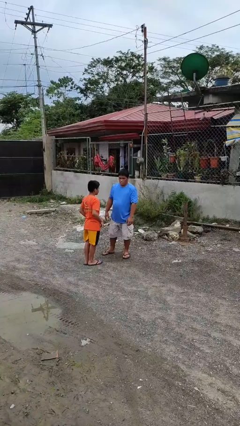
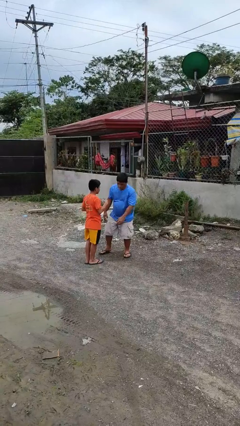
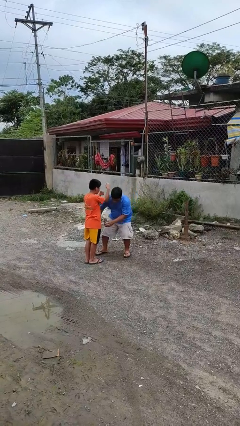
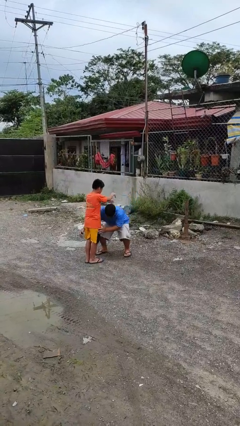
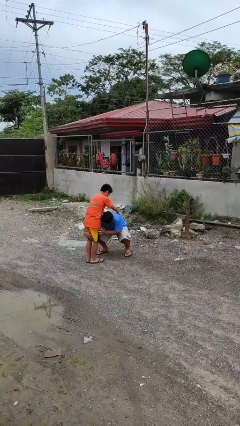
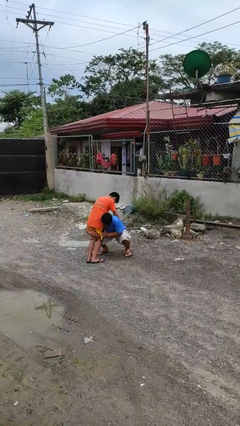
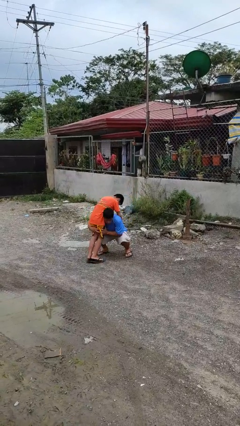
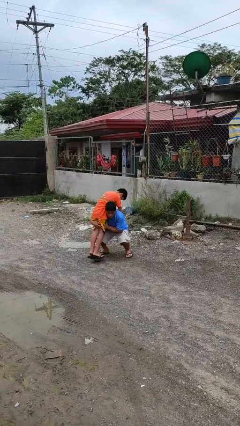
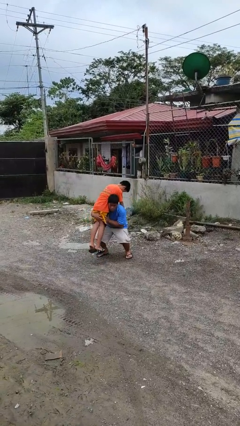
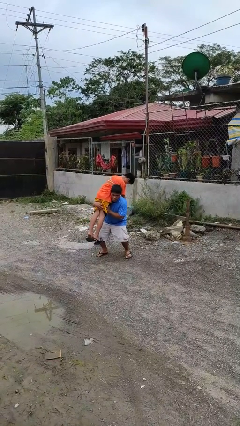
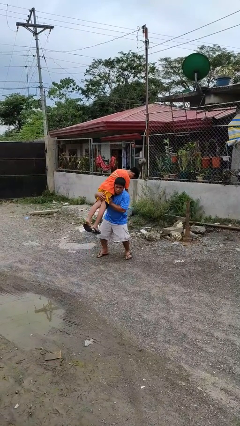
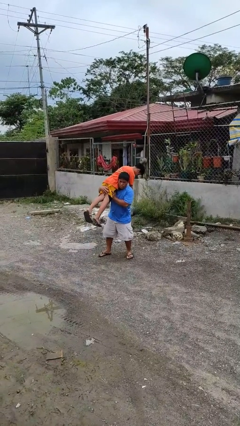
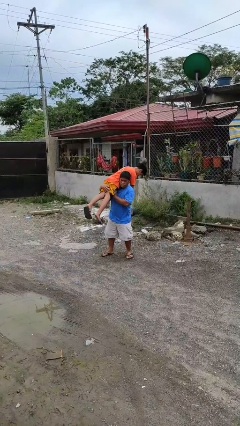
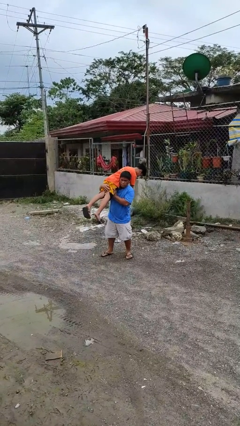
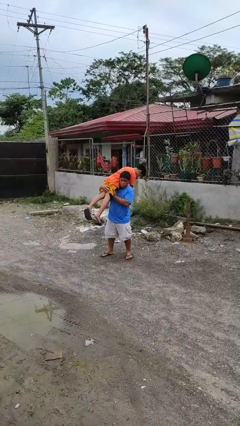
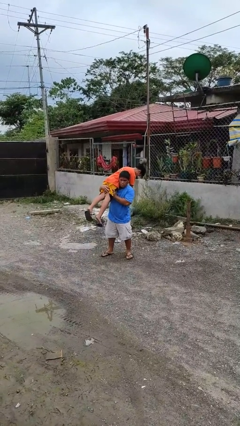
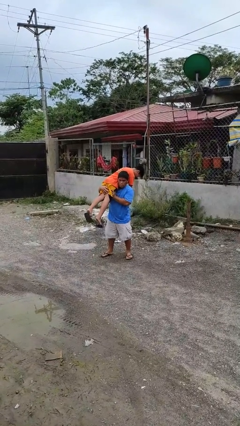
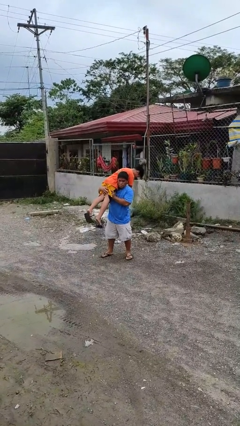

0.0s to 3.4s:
person carries person over shoulder

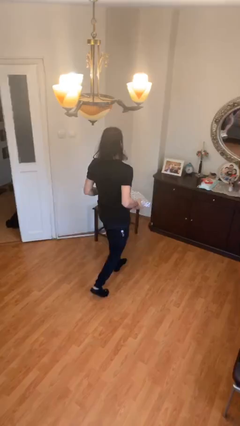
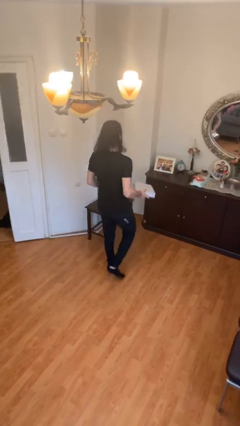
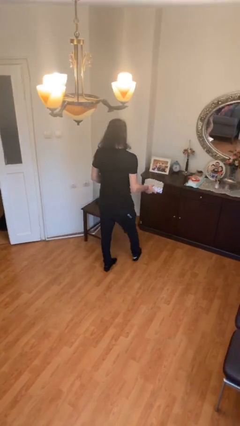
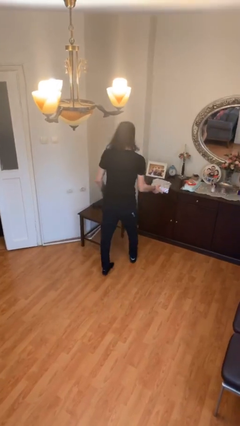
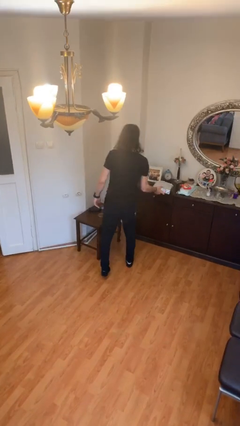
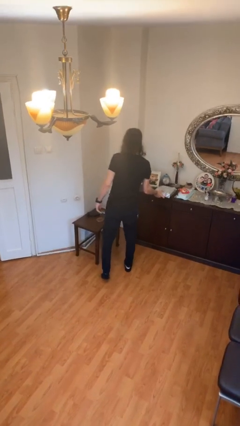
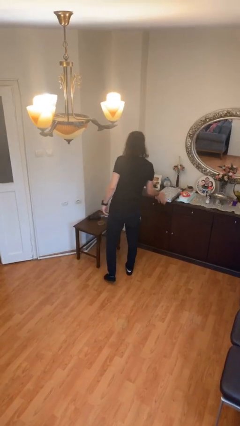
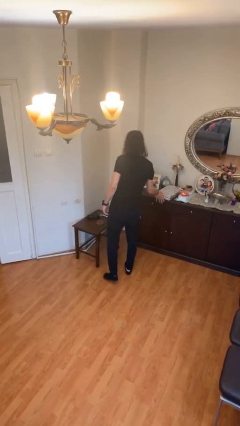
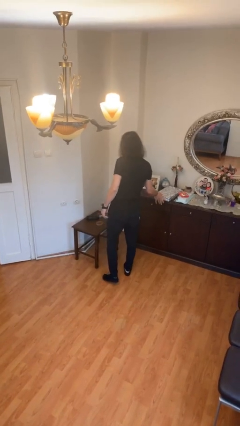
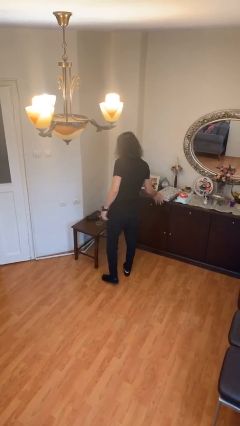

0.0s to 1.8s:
person puts down object on table

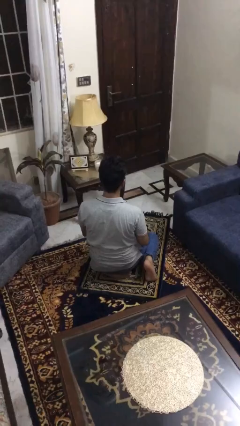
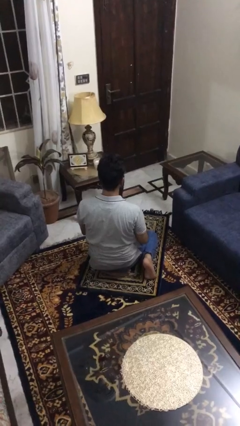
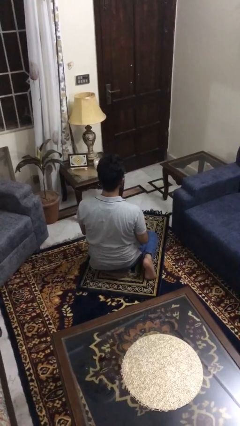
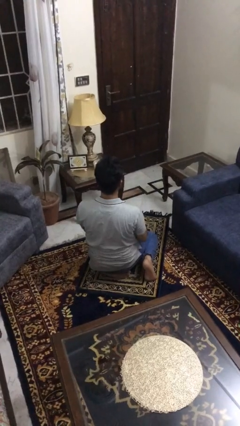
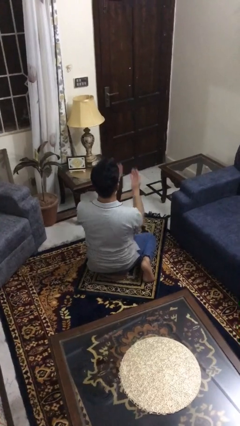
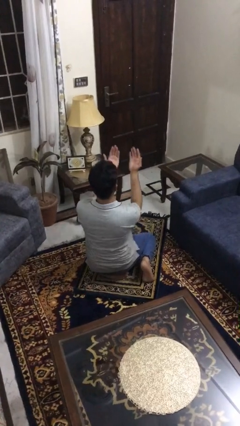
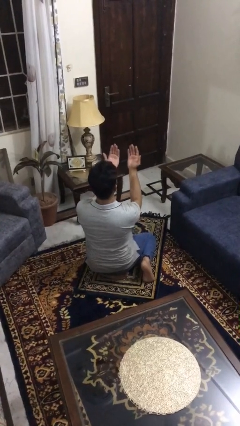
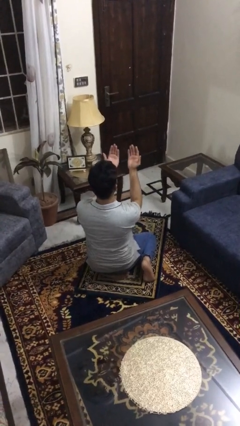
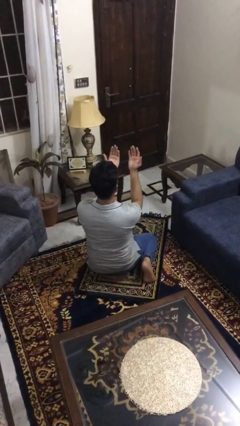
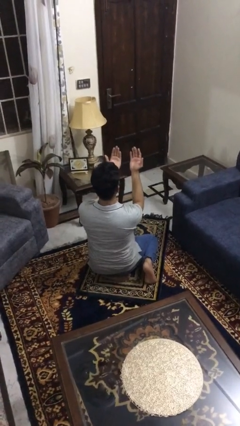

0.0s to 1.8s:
person prays

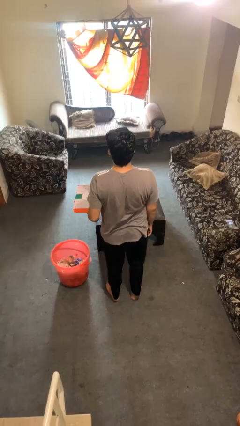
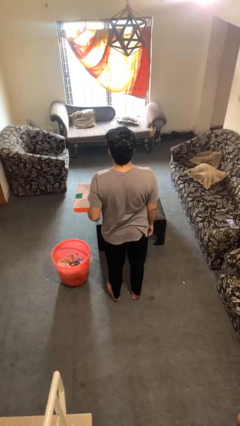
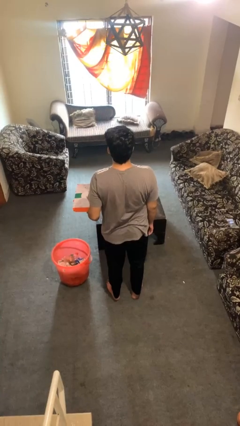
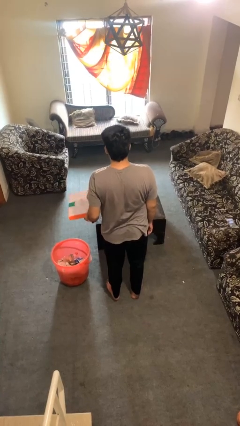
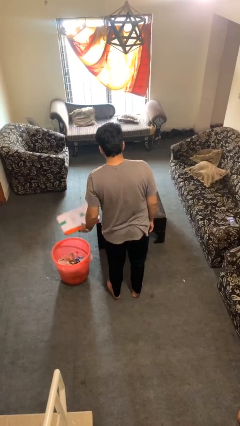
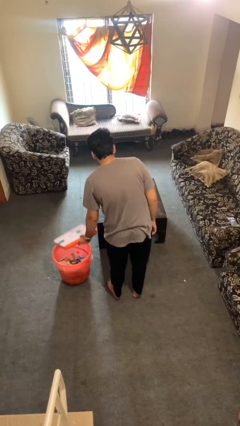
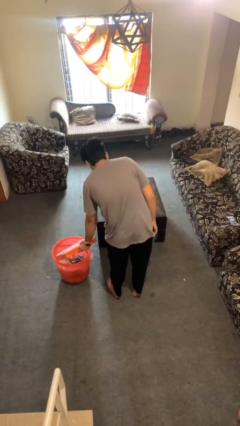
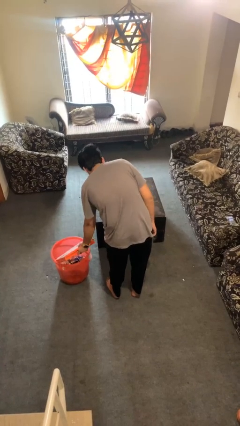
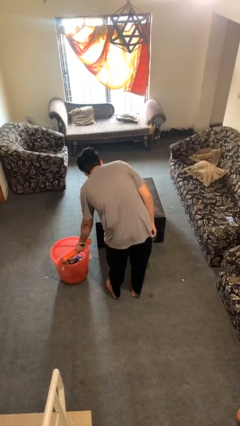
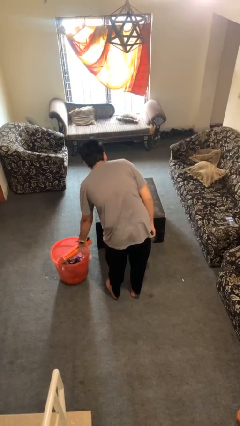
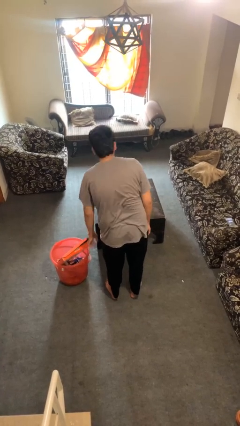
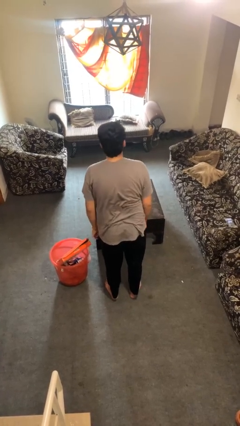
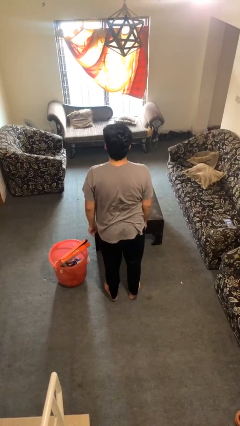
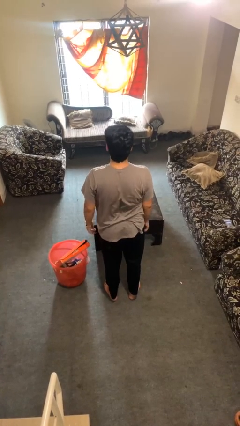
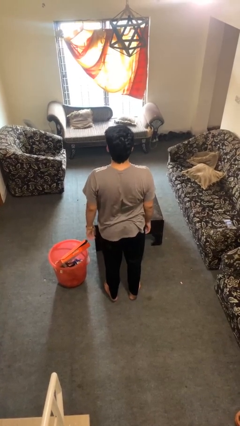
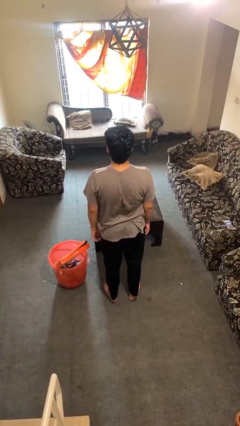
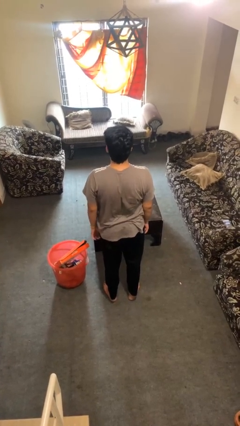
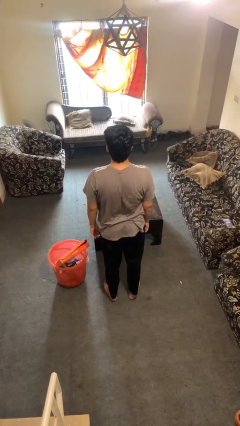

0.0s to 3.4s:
person puts object into basket

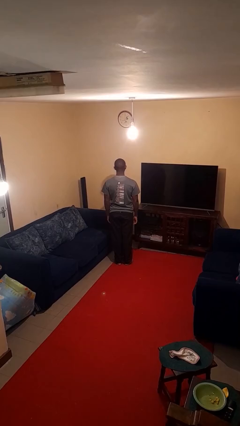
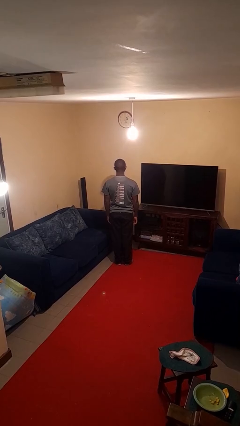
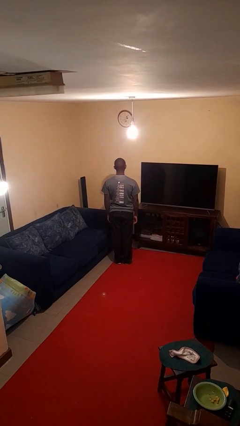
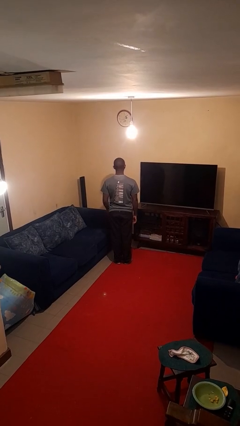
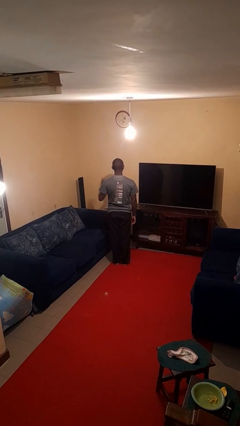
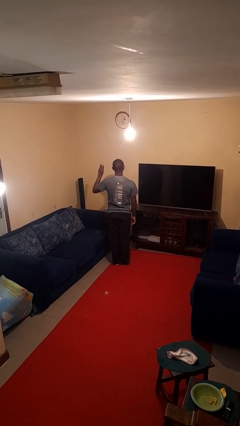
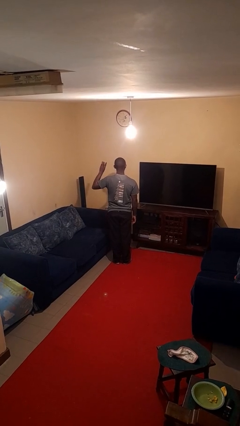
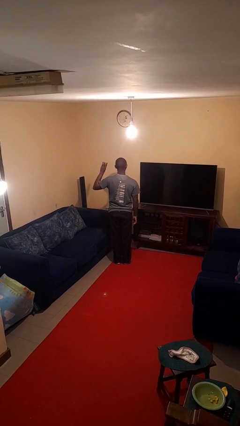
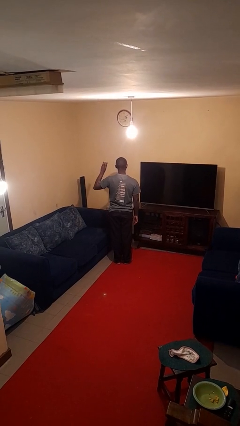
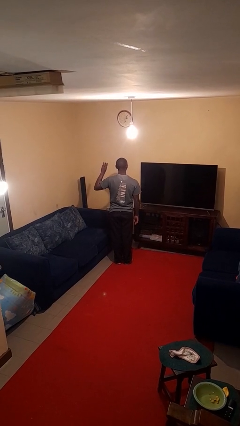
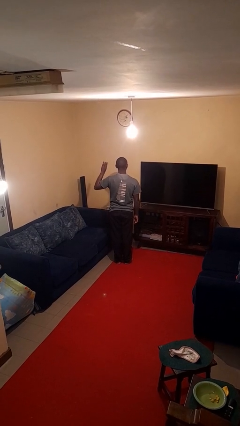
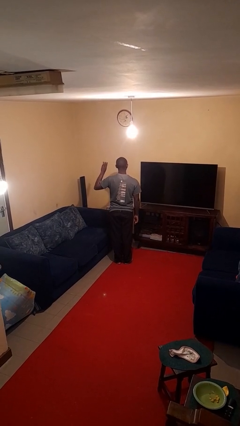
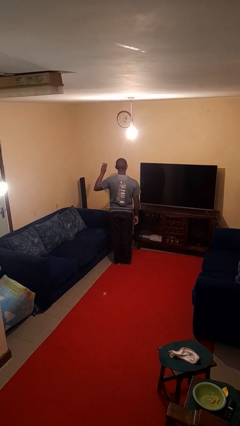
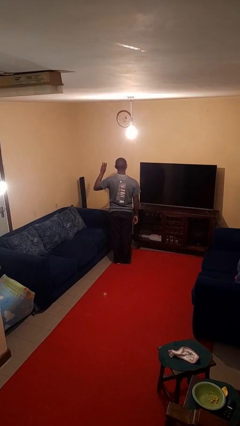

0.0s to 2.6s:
person gestures number three

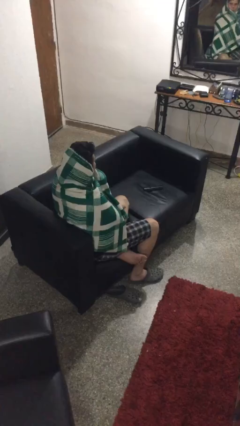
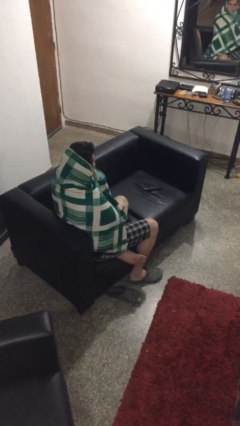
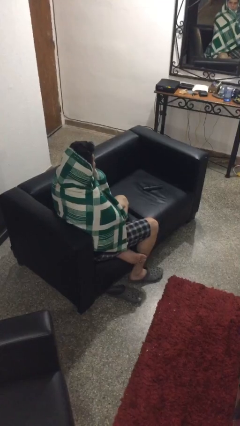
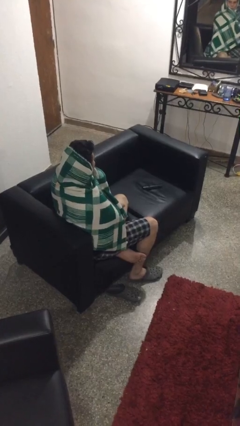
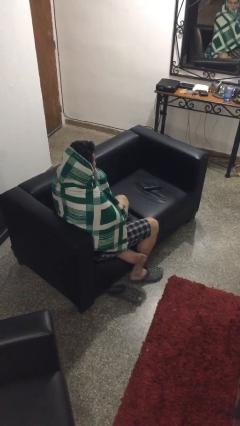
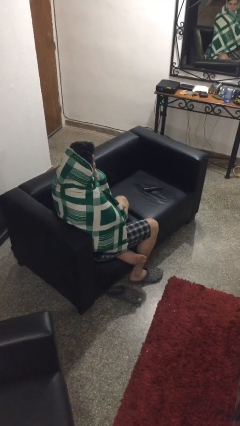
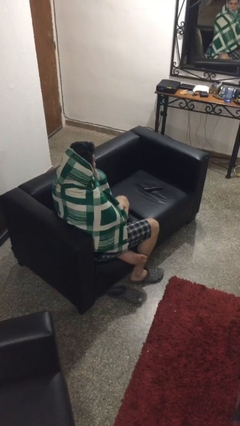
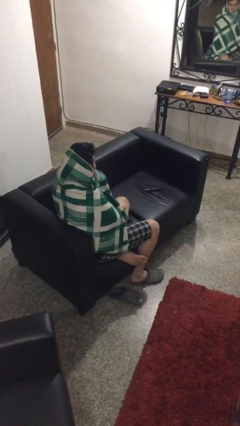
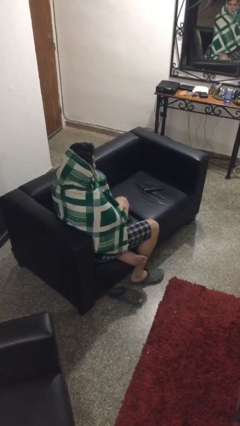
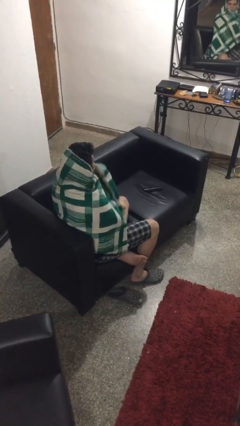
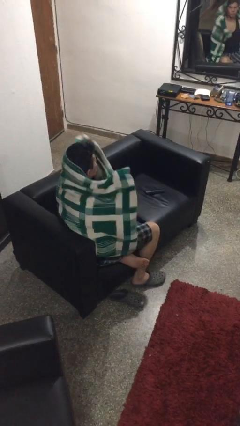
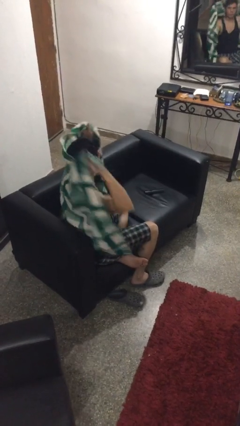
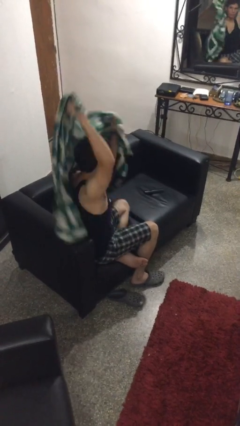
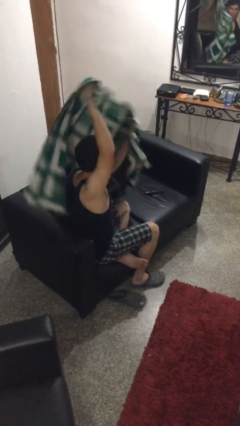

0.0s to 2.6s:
person uncovers with blanket

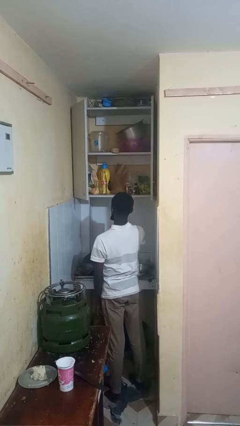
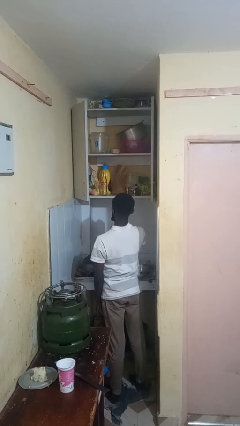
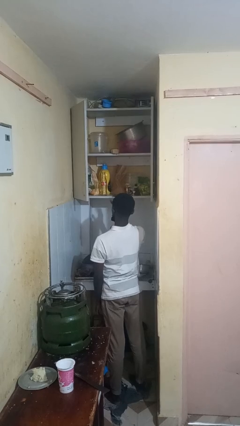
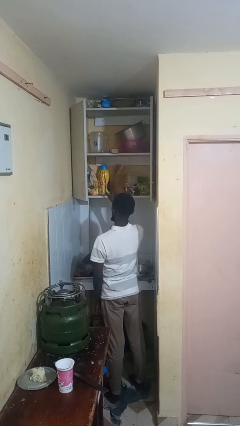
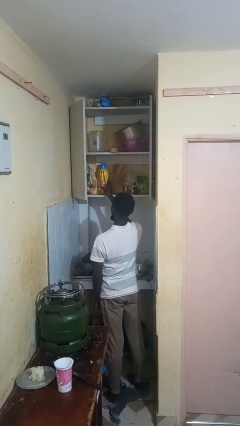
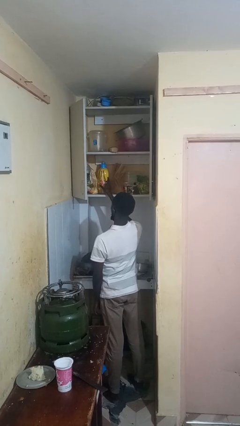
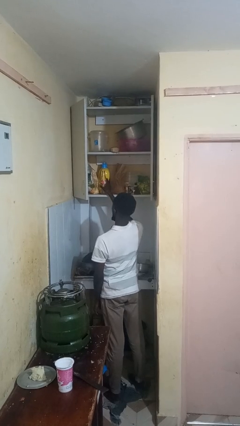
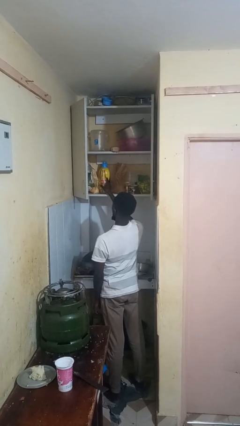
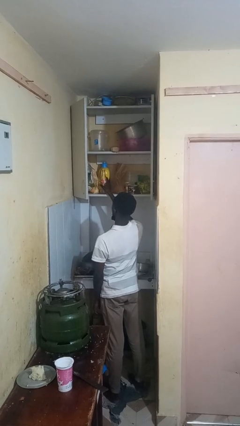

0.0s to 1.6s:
person picks up object from cabinet
